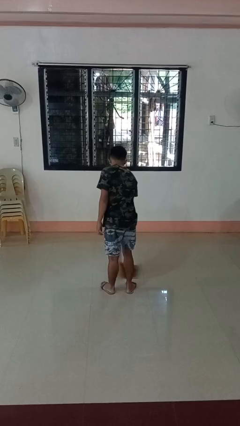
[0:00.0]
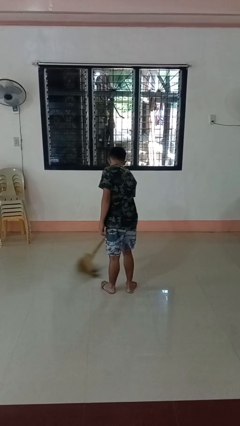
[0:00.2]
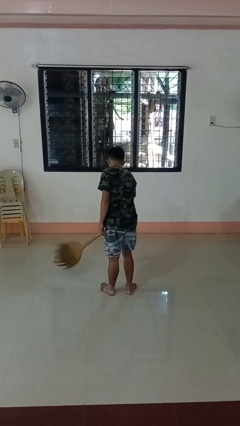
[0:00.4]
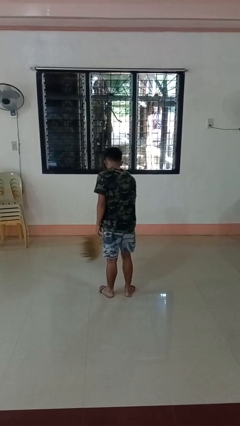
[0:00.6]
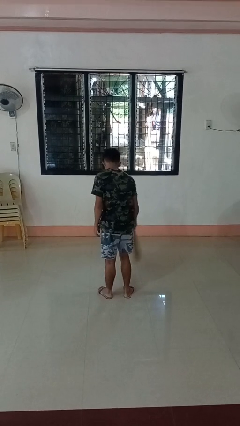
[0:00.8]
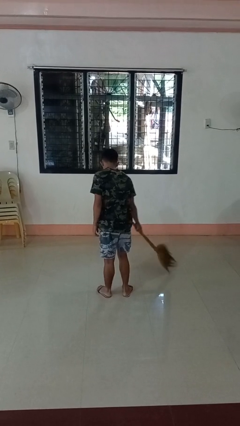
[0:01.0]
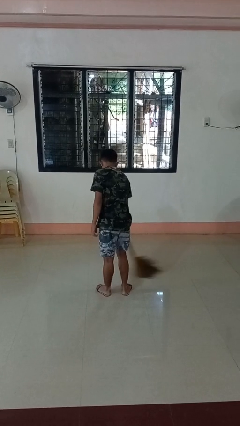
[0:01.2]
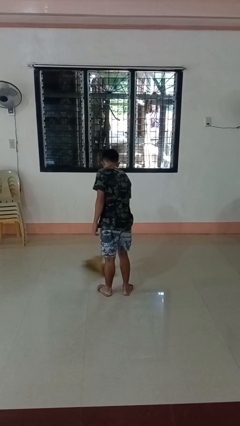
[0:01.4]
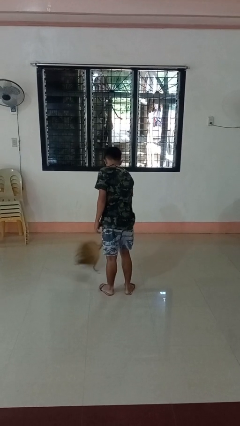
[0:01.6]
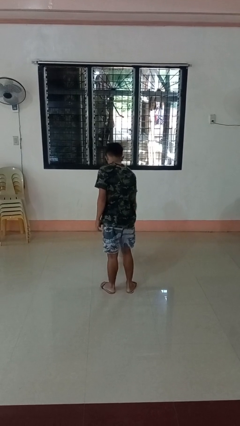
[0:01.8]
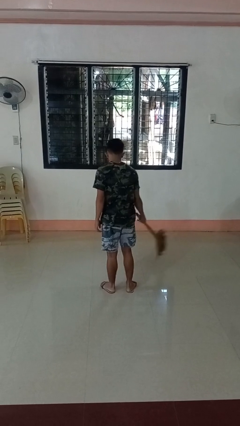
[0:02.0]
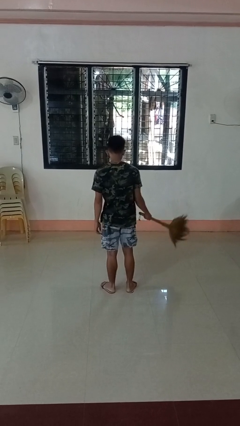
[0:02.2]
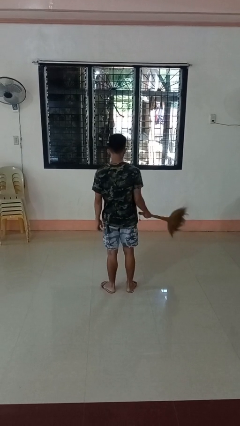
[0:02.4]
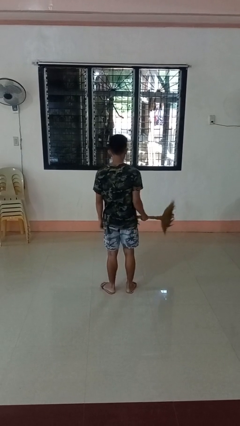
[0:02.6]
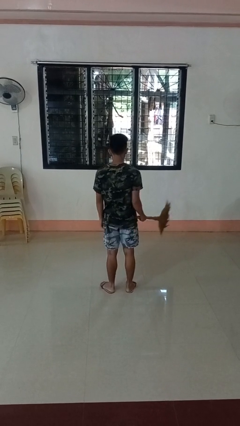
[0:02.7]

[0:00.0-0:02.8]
person sweeps floor

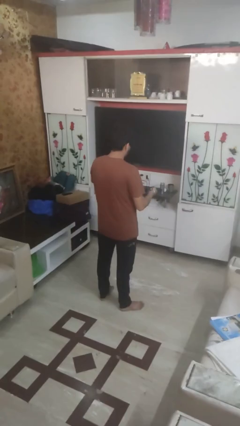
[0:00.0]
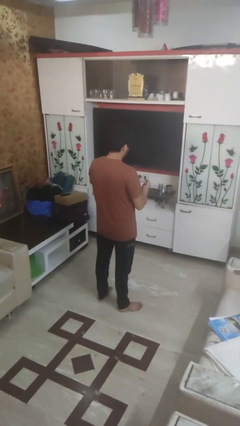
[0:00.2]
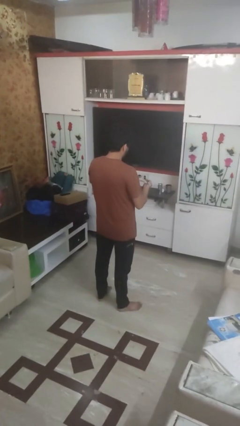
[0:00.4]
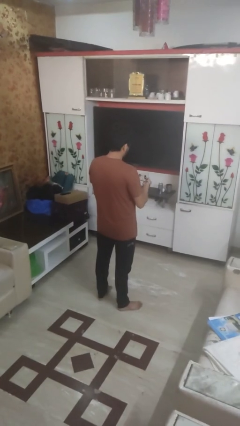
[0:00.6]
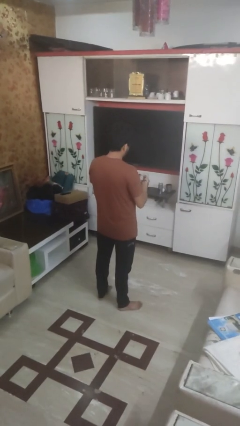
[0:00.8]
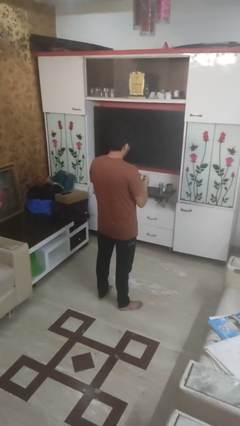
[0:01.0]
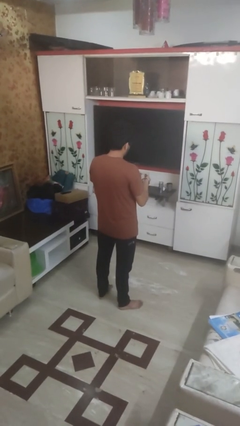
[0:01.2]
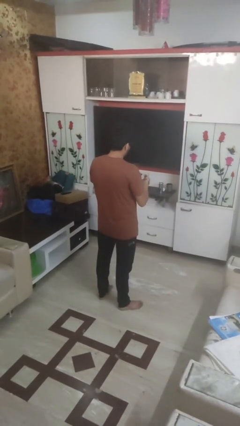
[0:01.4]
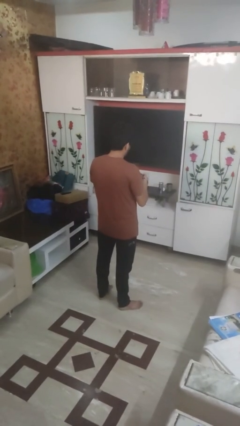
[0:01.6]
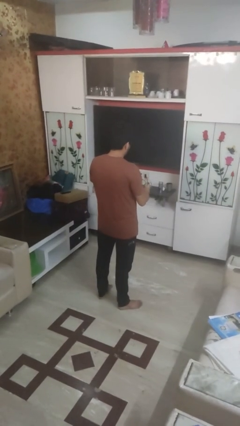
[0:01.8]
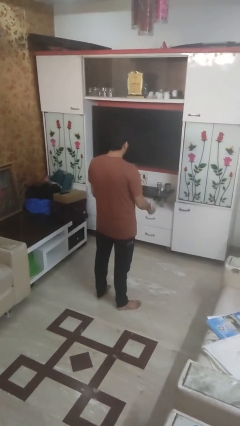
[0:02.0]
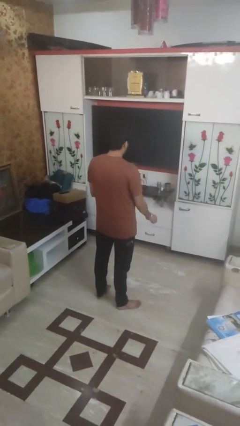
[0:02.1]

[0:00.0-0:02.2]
person files fingernails

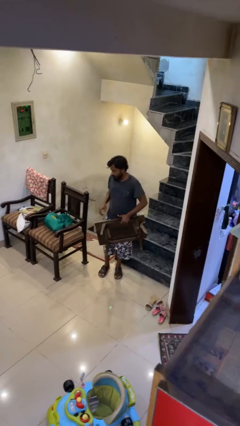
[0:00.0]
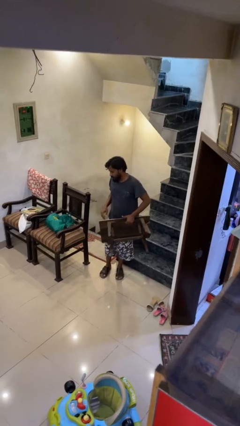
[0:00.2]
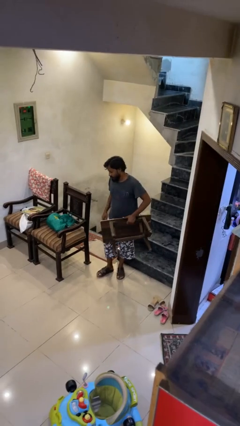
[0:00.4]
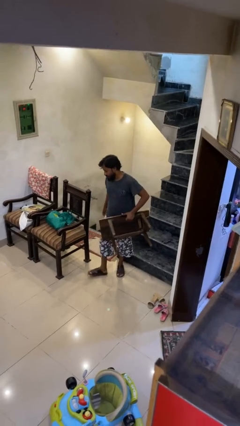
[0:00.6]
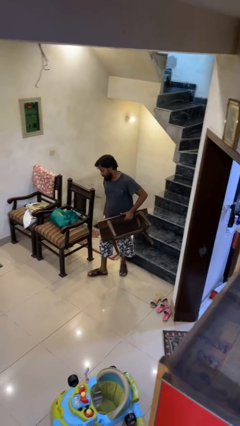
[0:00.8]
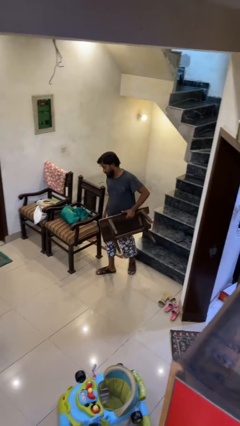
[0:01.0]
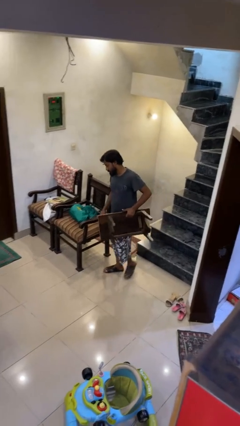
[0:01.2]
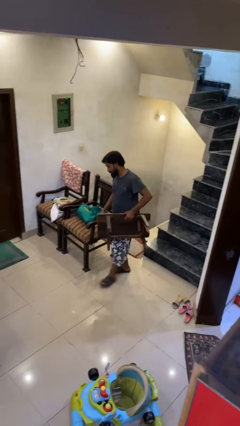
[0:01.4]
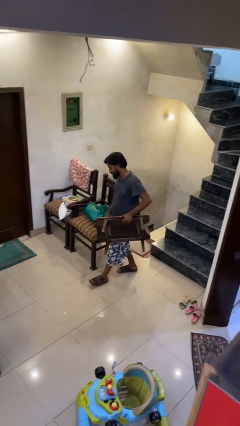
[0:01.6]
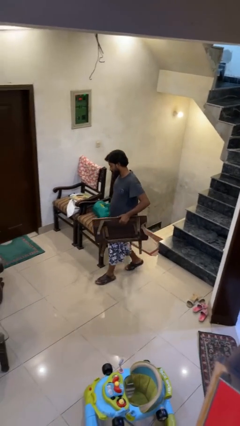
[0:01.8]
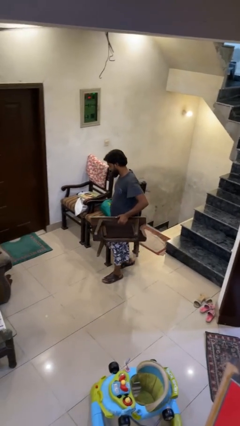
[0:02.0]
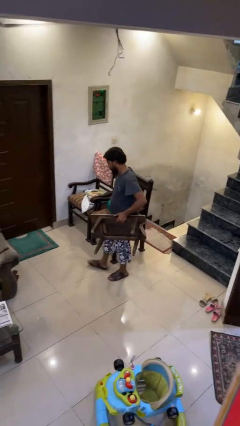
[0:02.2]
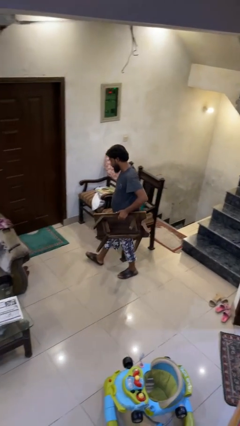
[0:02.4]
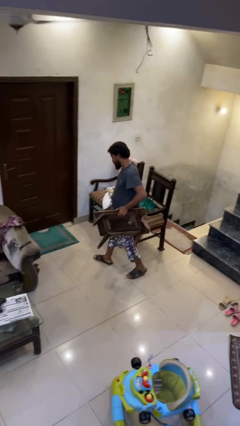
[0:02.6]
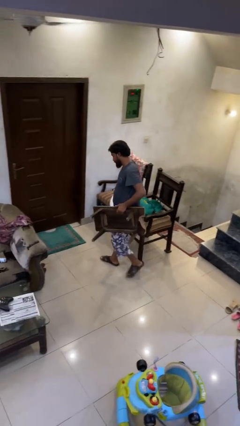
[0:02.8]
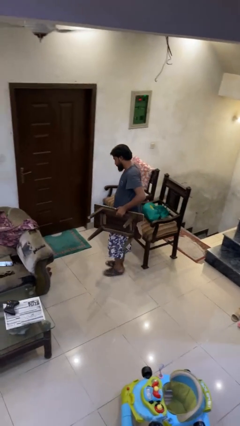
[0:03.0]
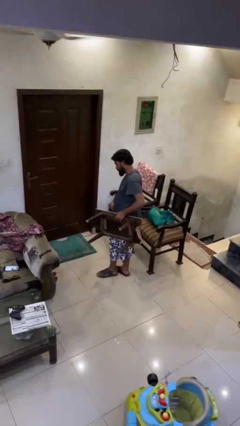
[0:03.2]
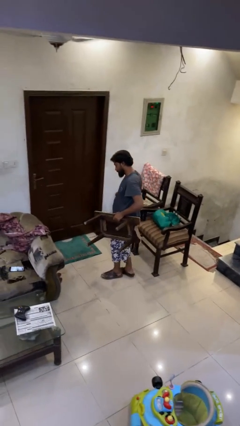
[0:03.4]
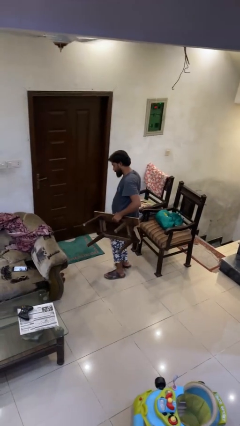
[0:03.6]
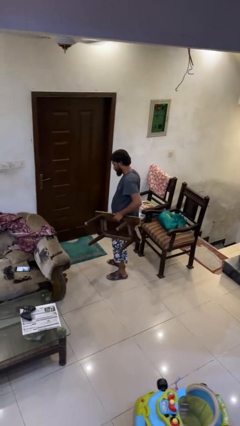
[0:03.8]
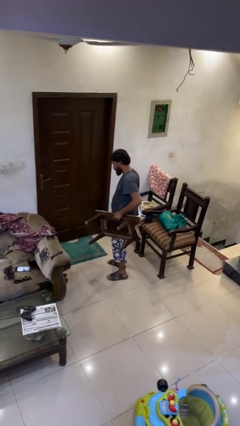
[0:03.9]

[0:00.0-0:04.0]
person carries furniture

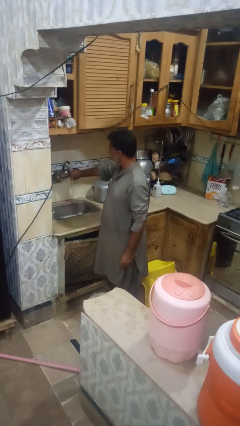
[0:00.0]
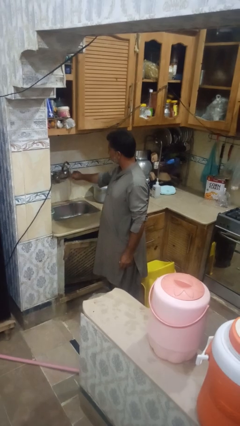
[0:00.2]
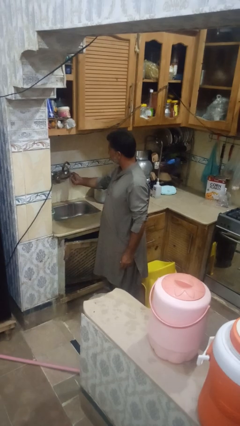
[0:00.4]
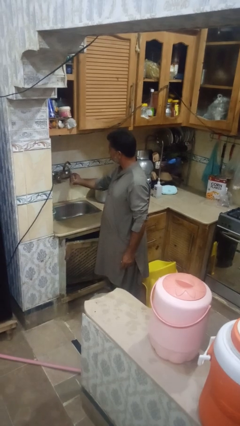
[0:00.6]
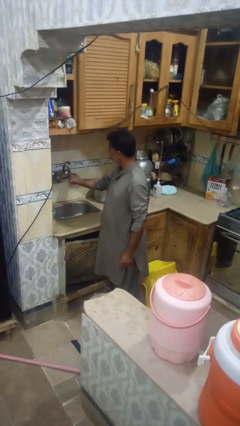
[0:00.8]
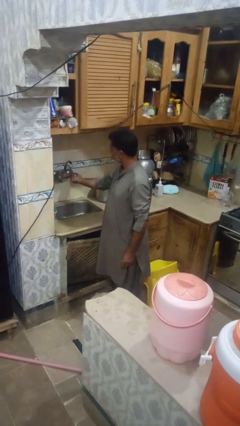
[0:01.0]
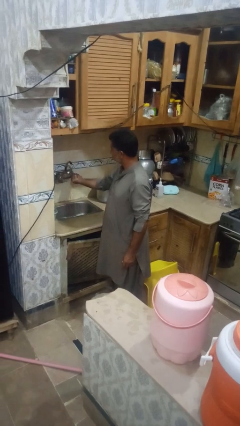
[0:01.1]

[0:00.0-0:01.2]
person turns off faucet

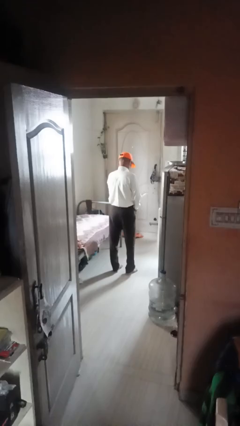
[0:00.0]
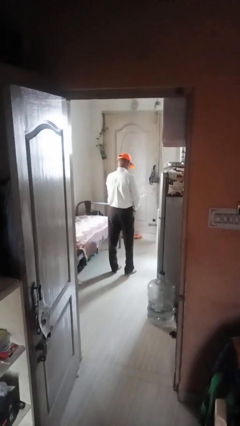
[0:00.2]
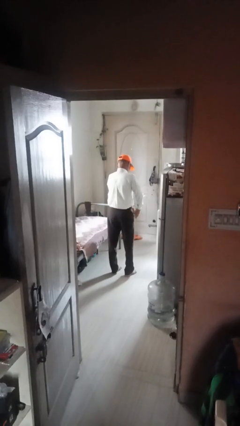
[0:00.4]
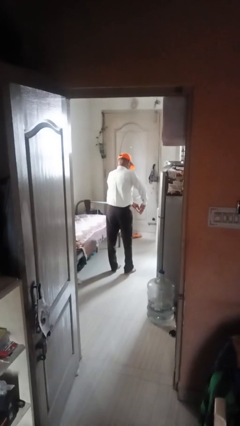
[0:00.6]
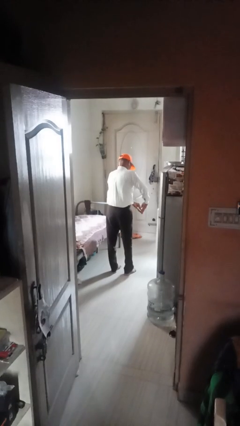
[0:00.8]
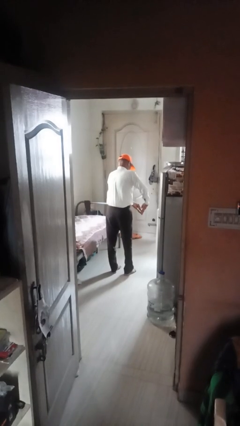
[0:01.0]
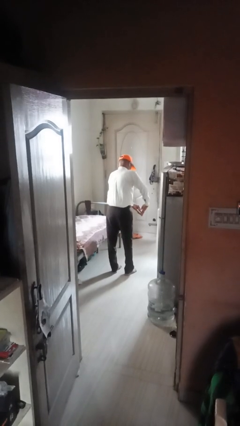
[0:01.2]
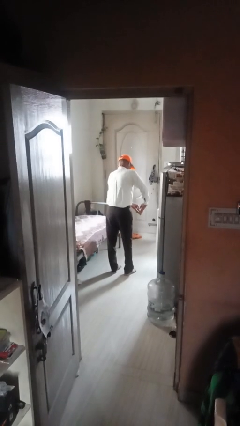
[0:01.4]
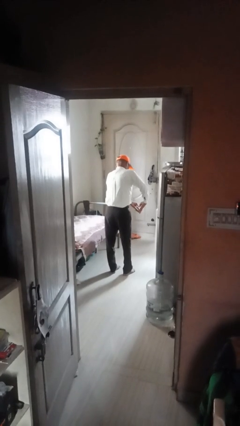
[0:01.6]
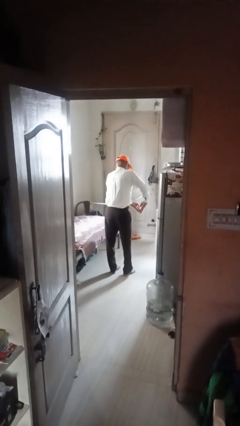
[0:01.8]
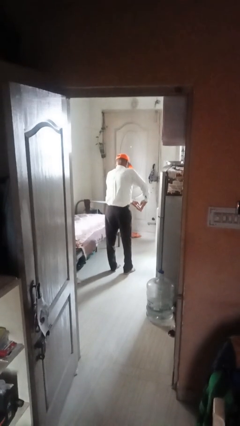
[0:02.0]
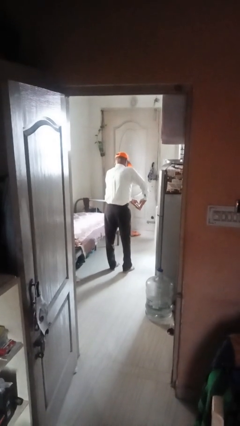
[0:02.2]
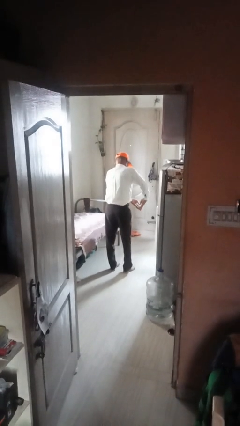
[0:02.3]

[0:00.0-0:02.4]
person gestures heart

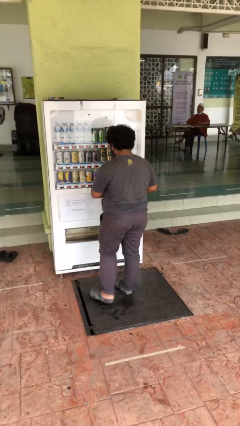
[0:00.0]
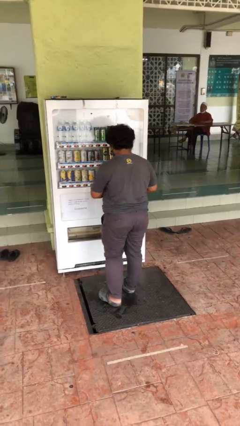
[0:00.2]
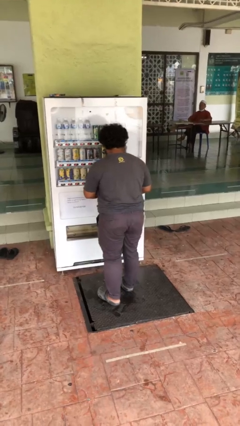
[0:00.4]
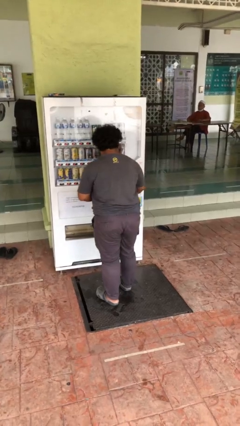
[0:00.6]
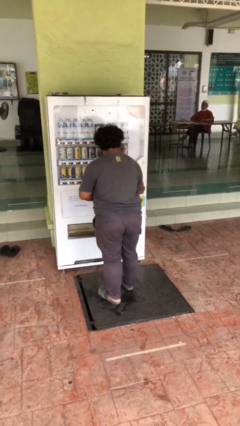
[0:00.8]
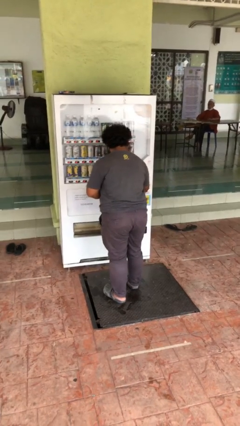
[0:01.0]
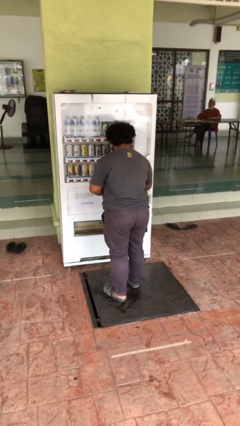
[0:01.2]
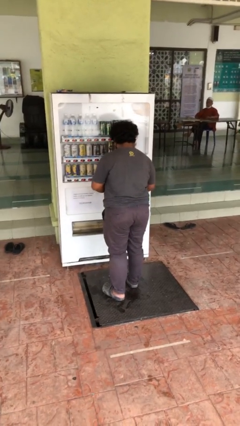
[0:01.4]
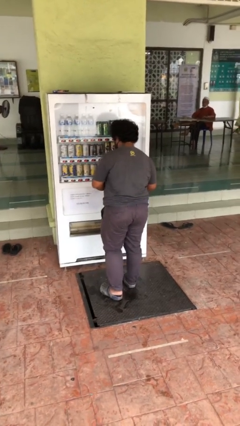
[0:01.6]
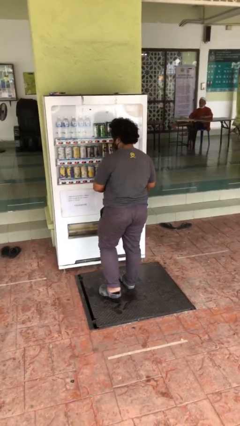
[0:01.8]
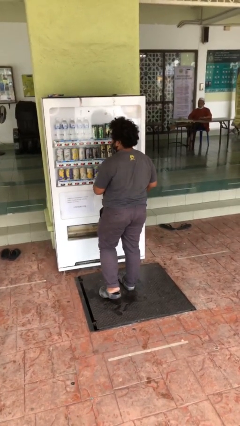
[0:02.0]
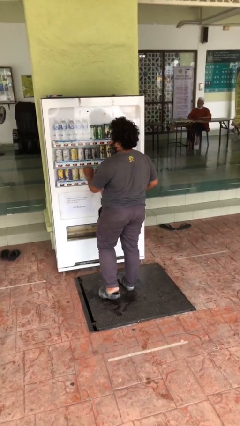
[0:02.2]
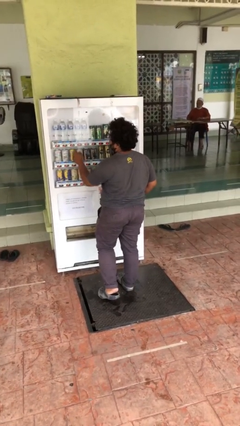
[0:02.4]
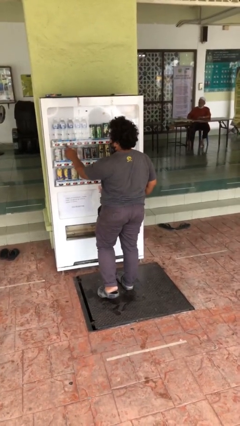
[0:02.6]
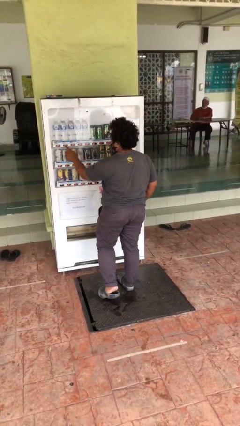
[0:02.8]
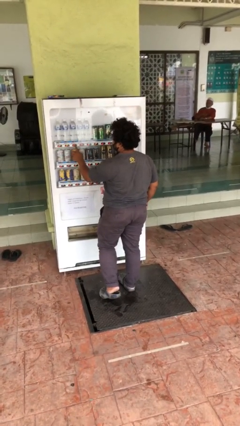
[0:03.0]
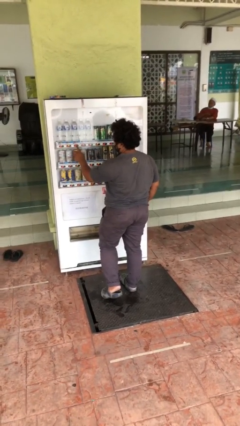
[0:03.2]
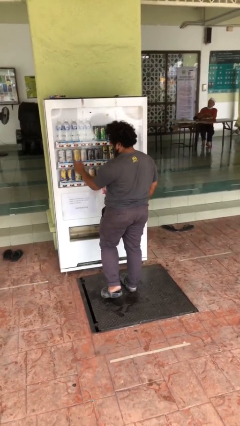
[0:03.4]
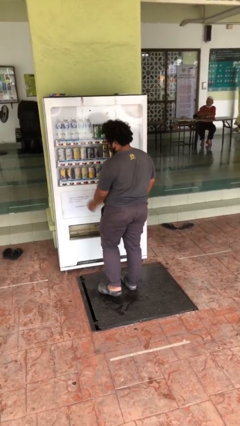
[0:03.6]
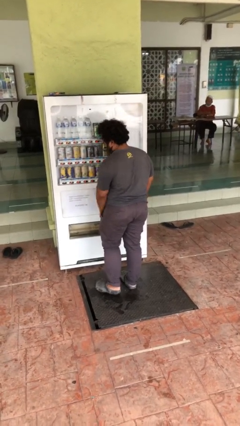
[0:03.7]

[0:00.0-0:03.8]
person purchases from machine

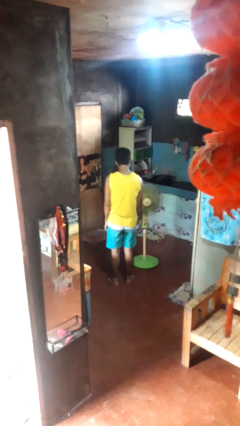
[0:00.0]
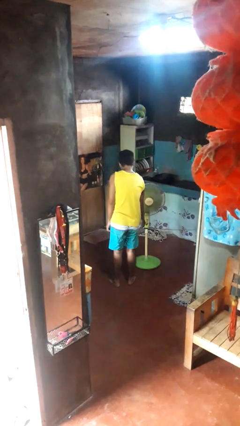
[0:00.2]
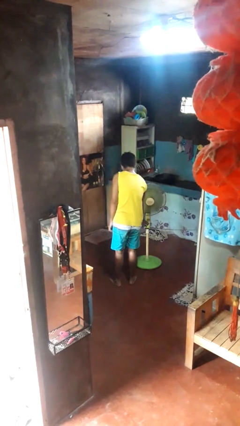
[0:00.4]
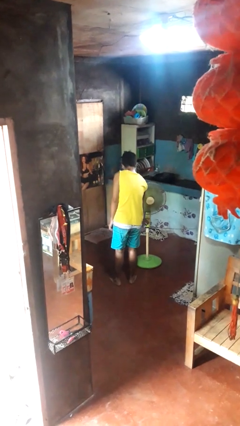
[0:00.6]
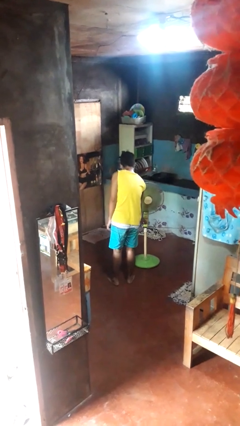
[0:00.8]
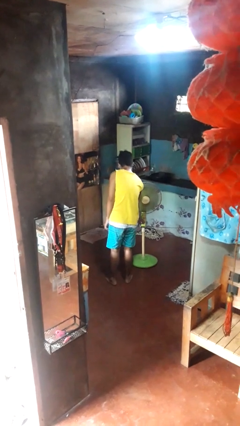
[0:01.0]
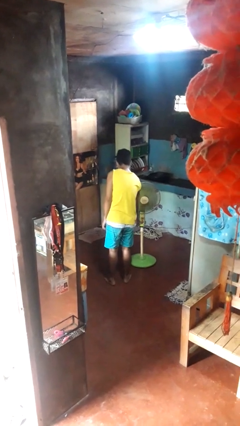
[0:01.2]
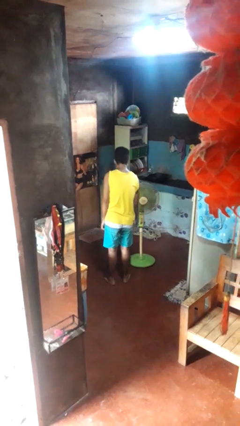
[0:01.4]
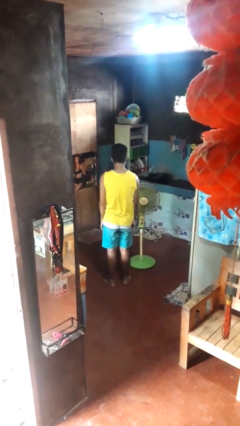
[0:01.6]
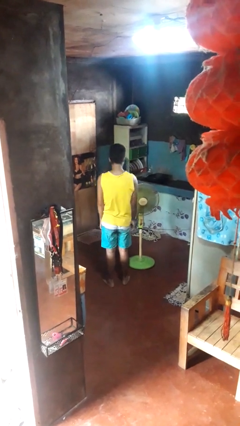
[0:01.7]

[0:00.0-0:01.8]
person turns off fan
